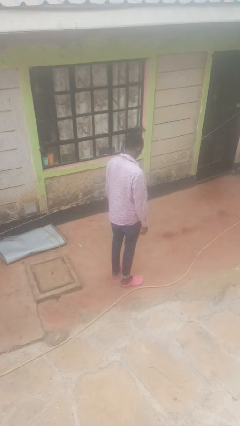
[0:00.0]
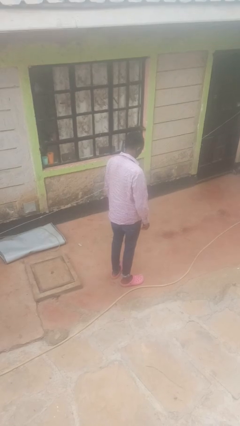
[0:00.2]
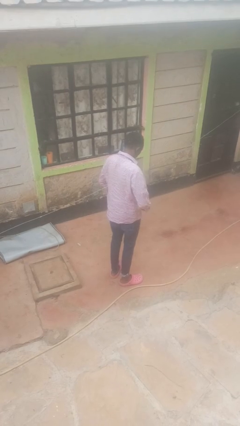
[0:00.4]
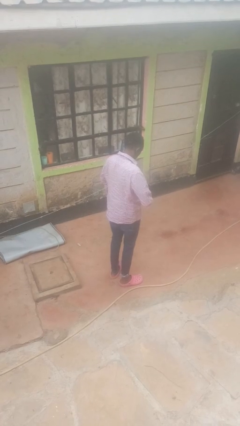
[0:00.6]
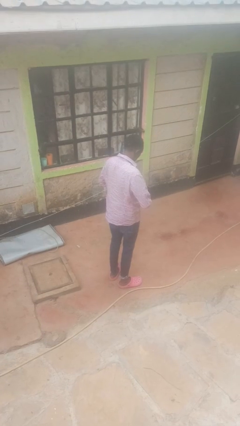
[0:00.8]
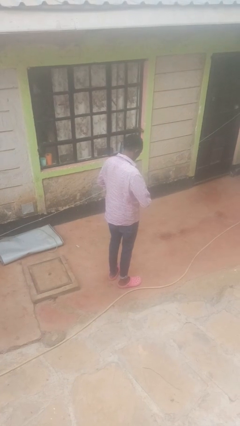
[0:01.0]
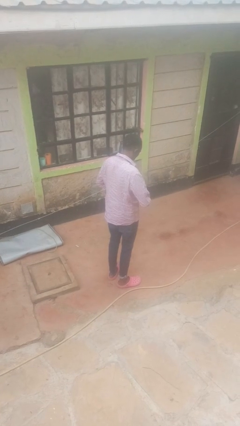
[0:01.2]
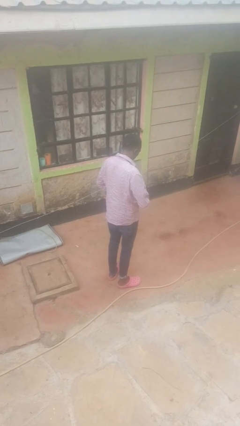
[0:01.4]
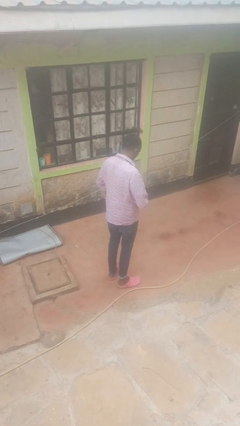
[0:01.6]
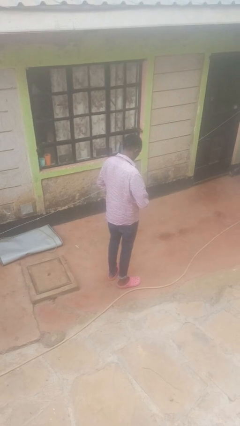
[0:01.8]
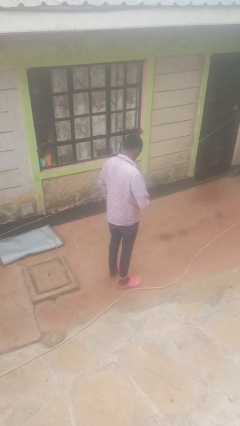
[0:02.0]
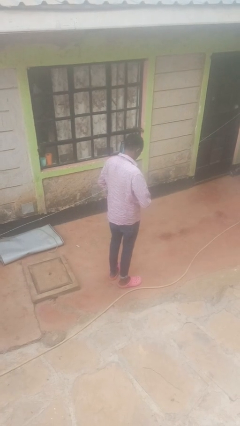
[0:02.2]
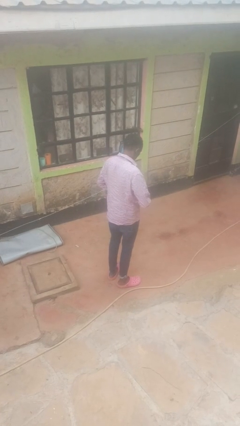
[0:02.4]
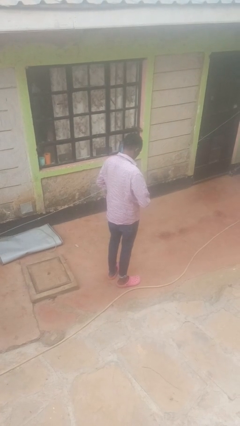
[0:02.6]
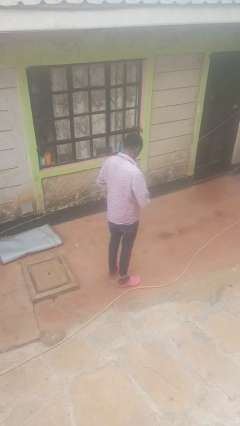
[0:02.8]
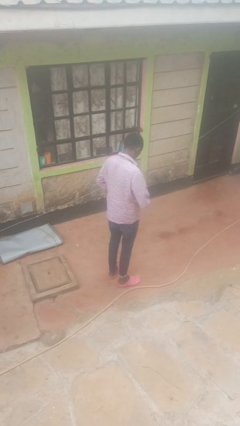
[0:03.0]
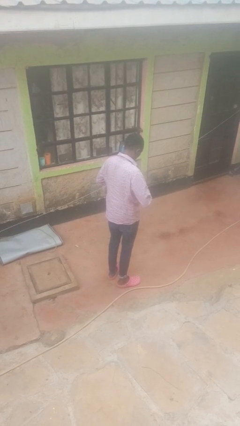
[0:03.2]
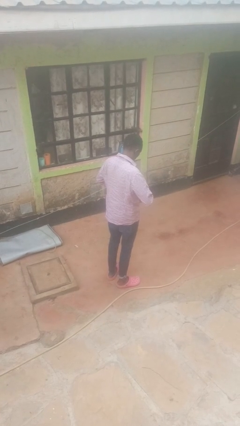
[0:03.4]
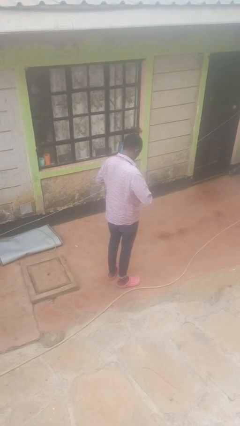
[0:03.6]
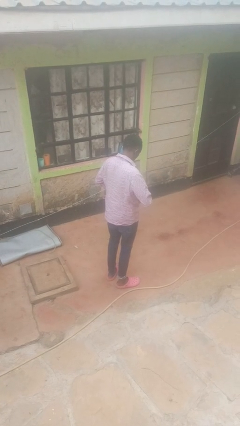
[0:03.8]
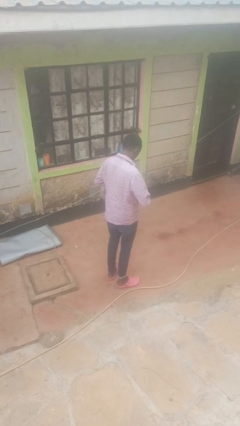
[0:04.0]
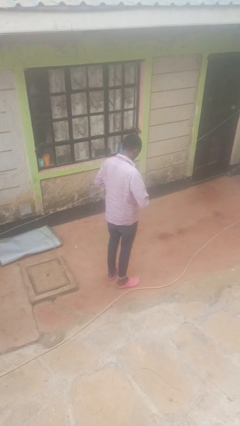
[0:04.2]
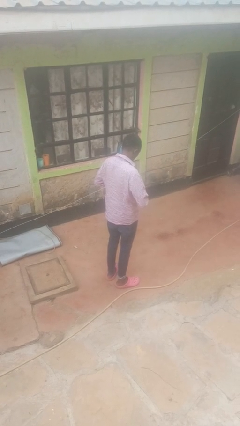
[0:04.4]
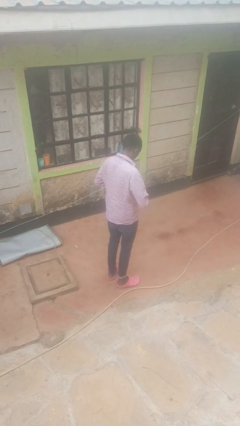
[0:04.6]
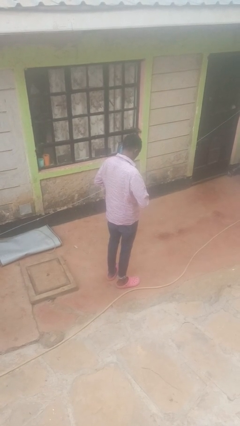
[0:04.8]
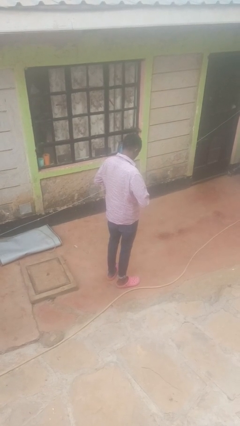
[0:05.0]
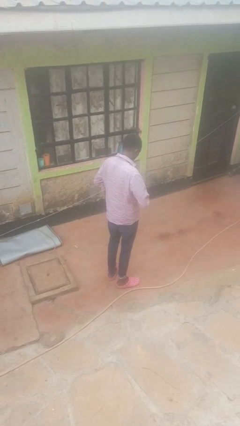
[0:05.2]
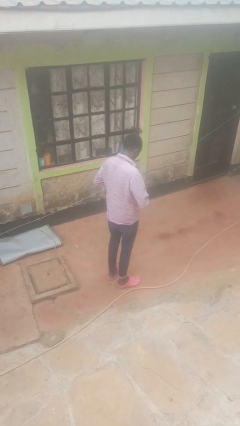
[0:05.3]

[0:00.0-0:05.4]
person buttons shirt

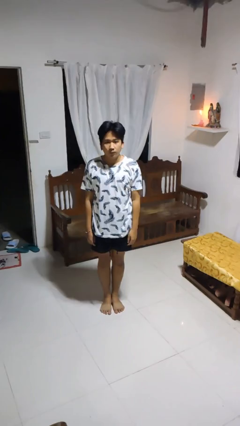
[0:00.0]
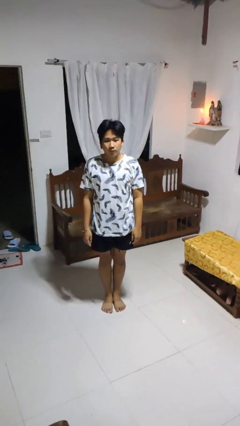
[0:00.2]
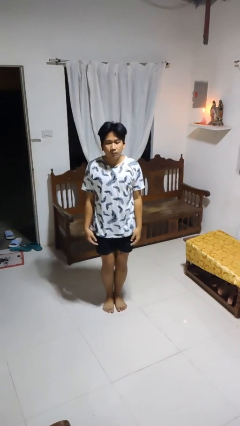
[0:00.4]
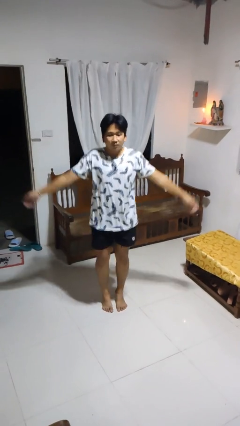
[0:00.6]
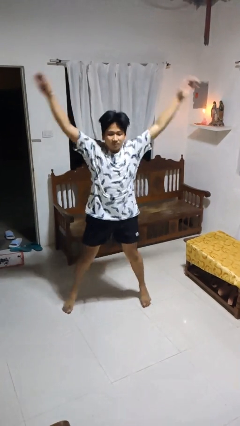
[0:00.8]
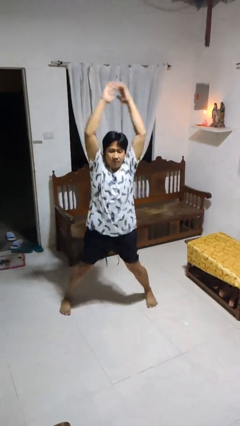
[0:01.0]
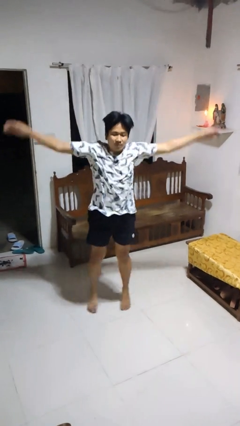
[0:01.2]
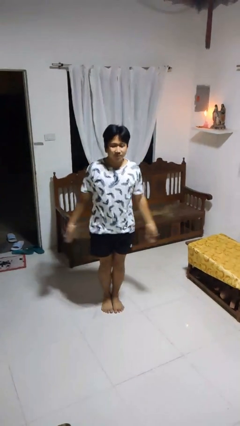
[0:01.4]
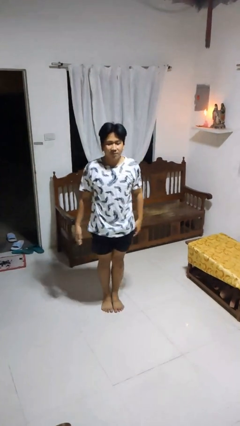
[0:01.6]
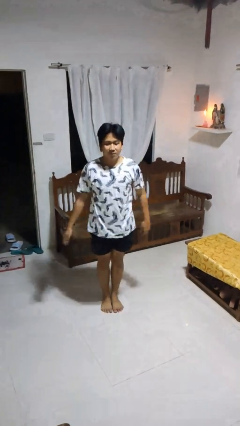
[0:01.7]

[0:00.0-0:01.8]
person exercises with jumping jacks

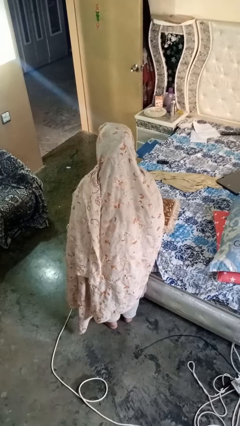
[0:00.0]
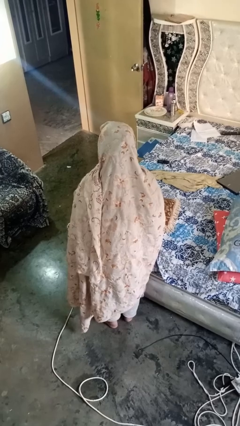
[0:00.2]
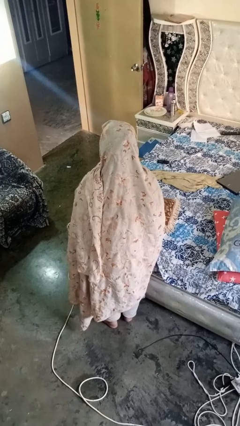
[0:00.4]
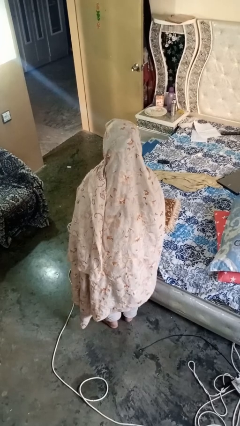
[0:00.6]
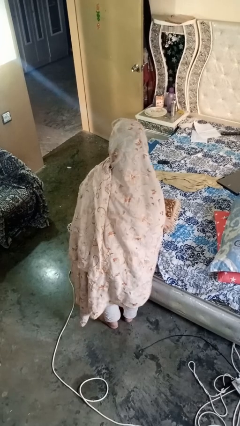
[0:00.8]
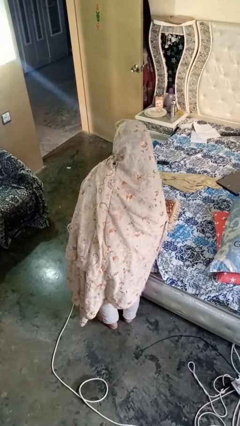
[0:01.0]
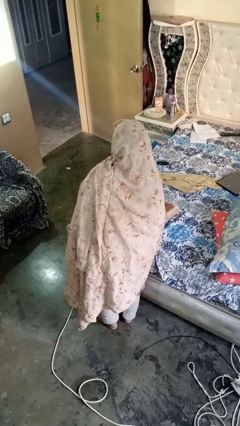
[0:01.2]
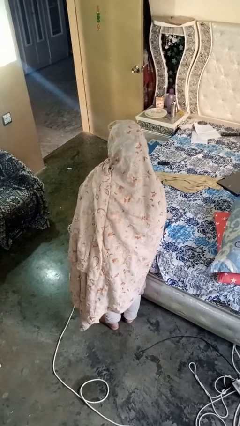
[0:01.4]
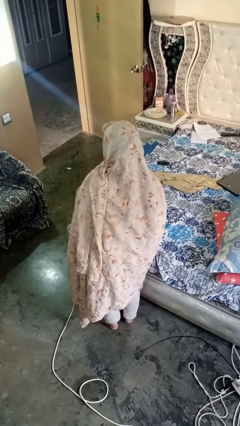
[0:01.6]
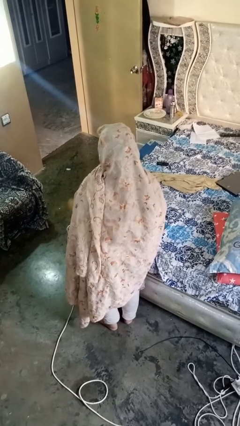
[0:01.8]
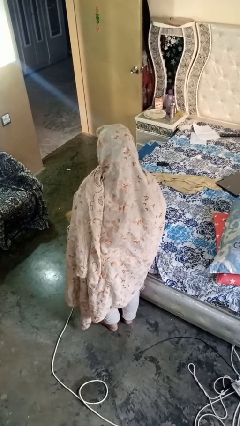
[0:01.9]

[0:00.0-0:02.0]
person picks up object from bed

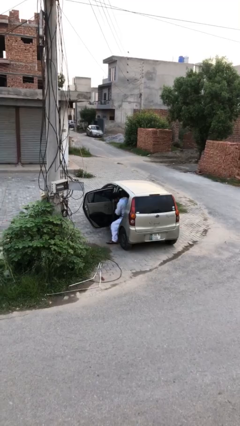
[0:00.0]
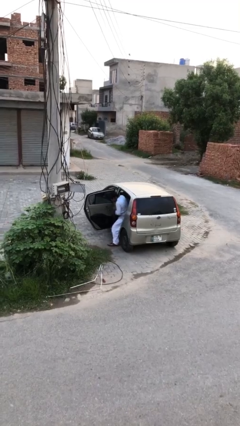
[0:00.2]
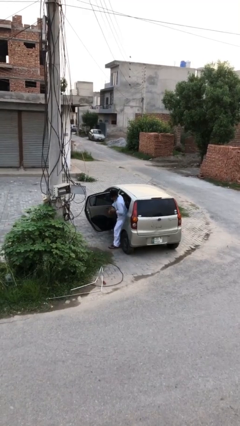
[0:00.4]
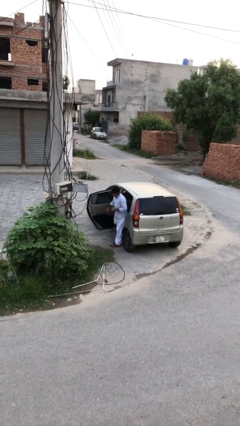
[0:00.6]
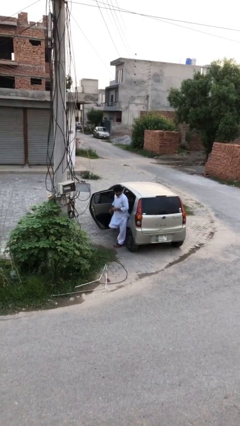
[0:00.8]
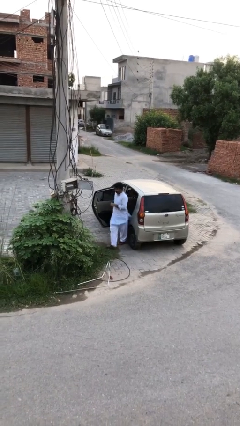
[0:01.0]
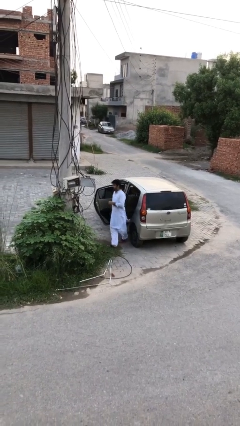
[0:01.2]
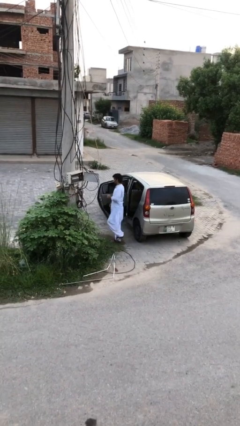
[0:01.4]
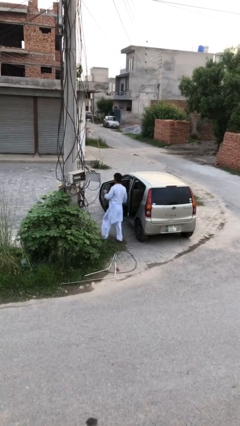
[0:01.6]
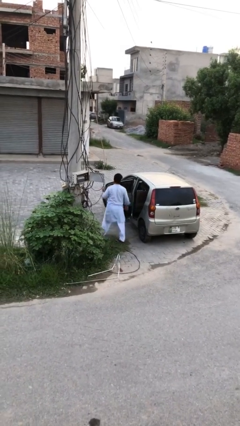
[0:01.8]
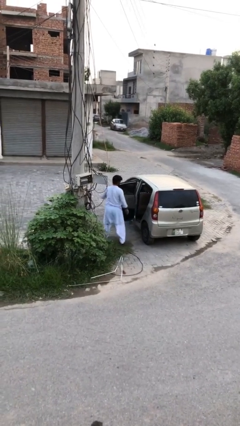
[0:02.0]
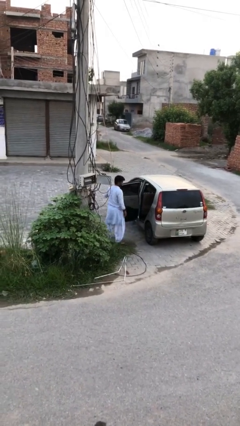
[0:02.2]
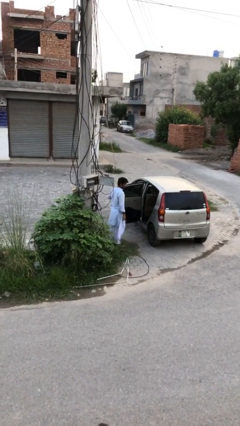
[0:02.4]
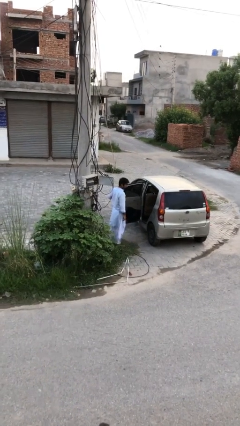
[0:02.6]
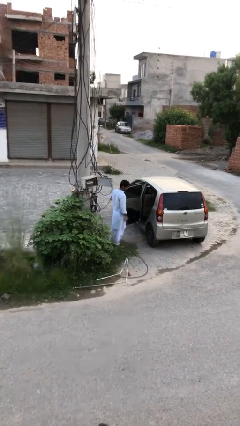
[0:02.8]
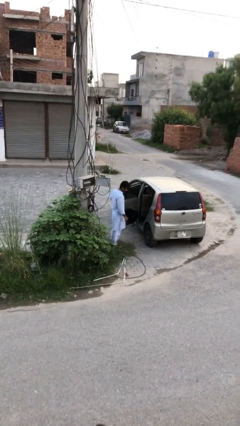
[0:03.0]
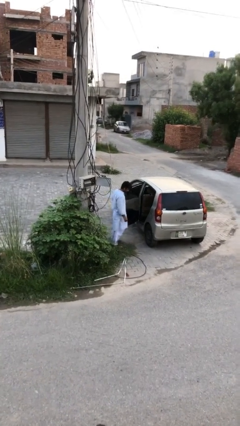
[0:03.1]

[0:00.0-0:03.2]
person exits car

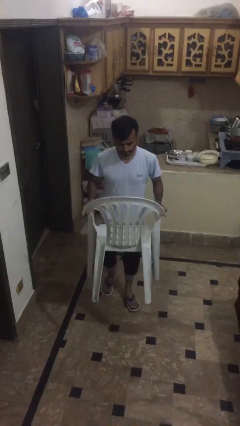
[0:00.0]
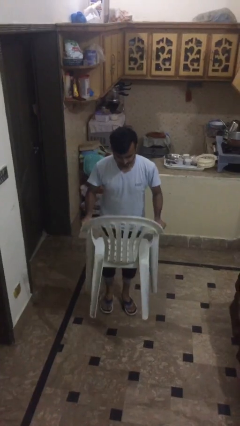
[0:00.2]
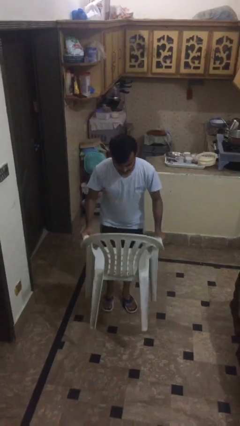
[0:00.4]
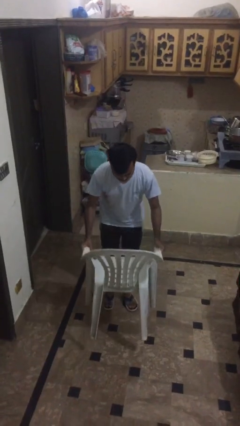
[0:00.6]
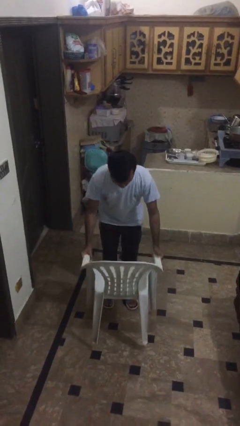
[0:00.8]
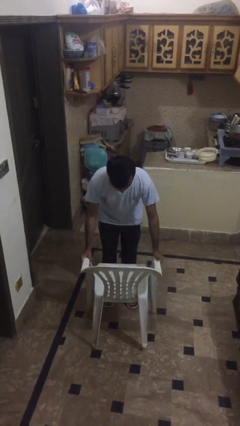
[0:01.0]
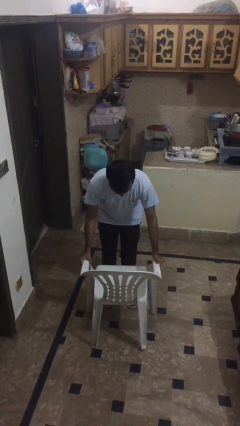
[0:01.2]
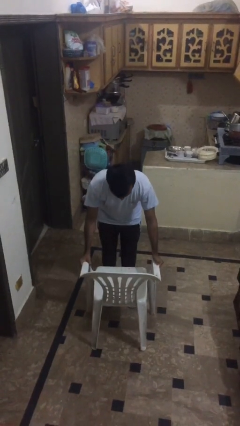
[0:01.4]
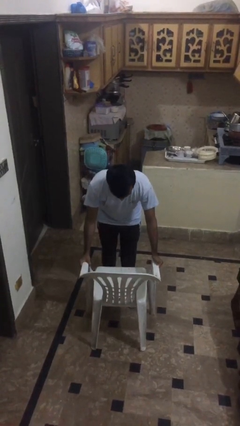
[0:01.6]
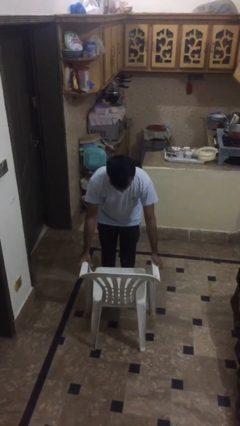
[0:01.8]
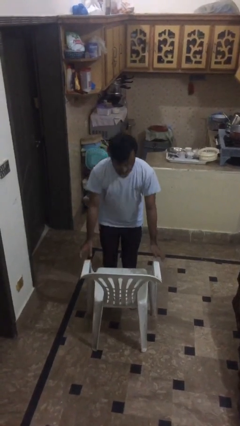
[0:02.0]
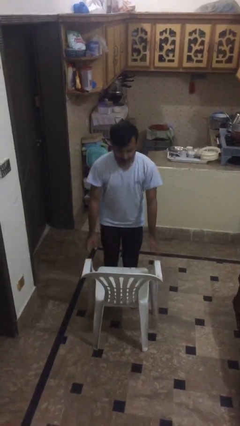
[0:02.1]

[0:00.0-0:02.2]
person puts down object on floor

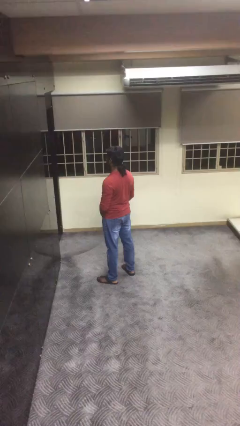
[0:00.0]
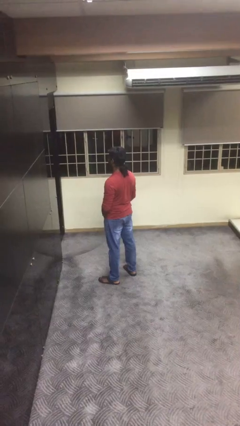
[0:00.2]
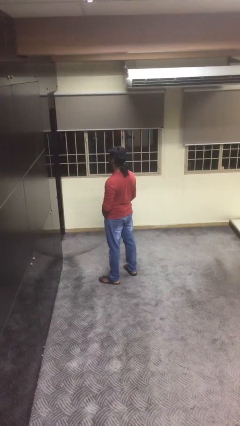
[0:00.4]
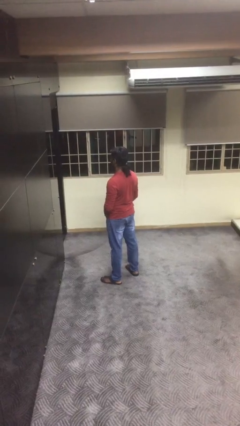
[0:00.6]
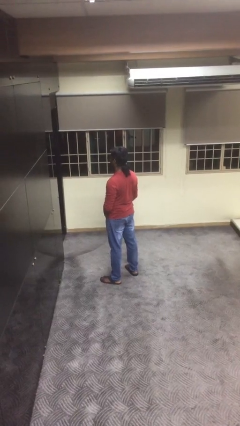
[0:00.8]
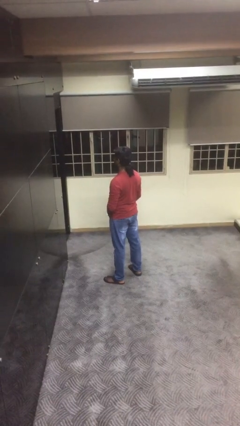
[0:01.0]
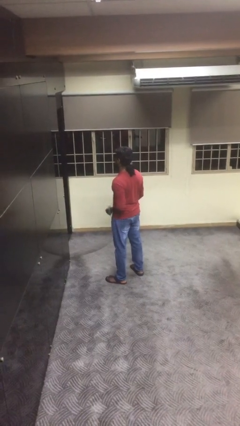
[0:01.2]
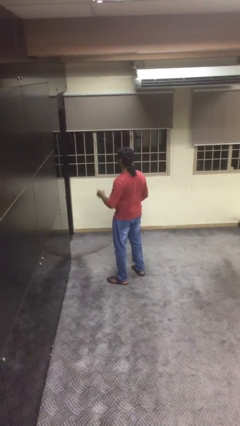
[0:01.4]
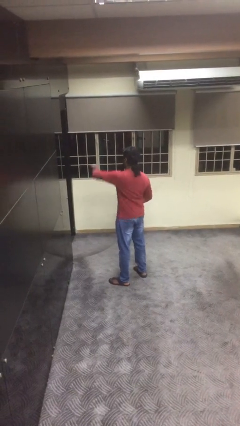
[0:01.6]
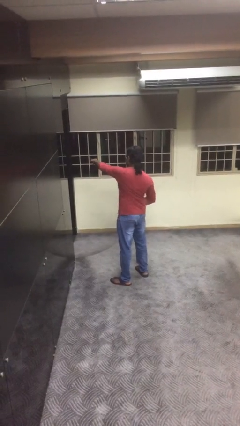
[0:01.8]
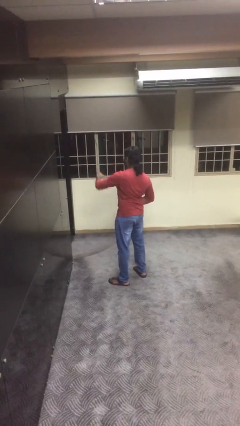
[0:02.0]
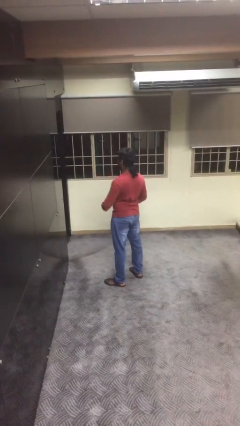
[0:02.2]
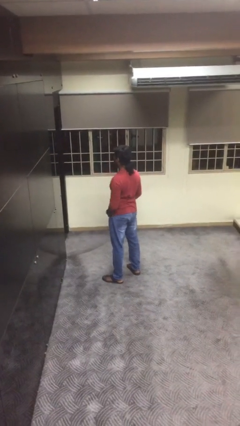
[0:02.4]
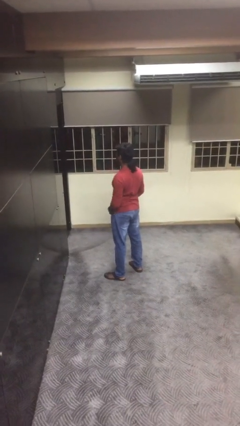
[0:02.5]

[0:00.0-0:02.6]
person punches
